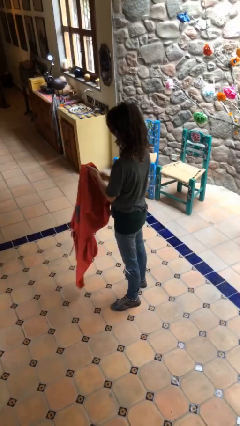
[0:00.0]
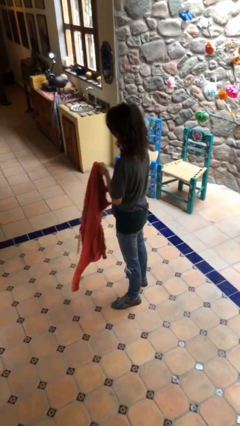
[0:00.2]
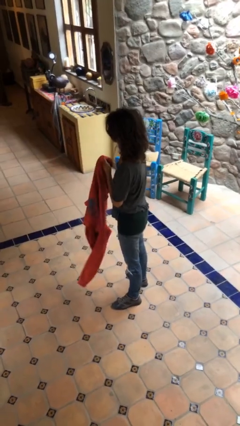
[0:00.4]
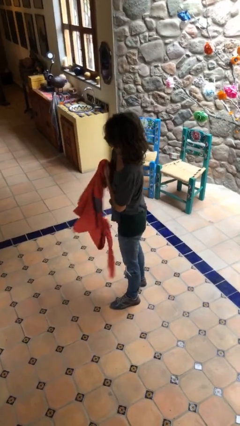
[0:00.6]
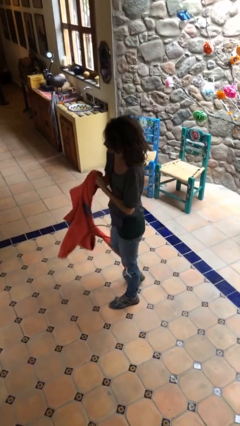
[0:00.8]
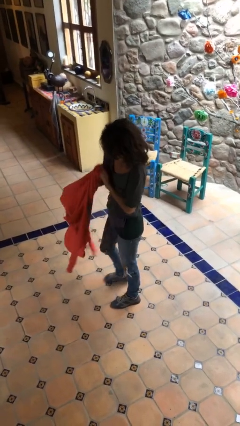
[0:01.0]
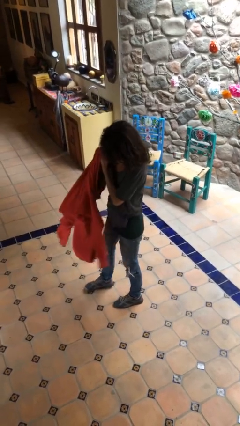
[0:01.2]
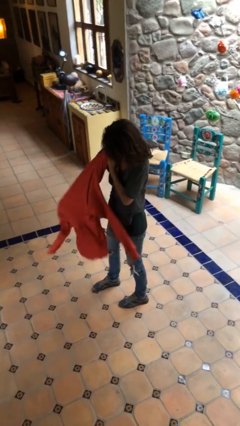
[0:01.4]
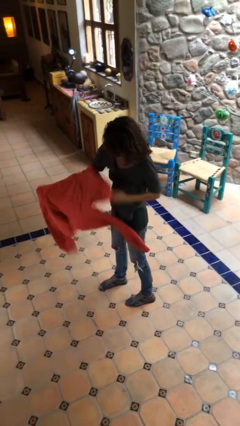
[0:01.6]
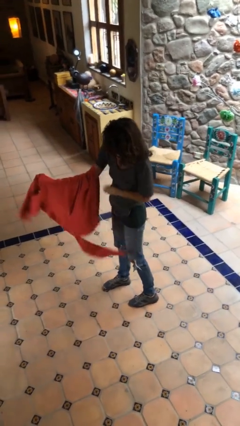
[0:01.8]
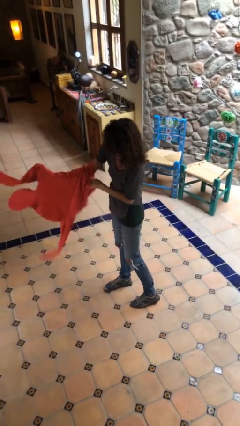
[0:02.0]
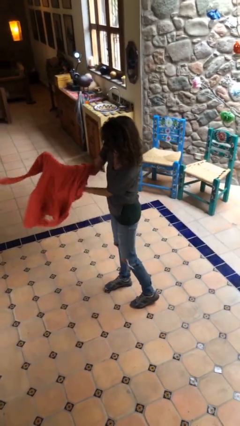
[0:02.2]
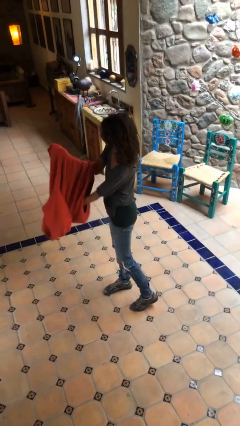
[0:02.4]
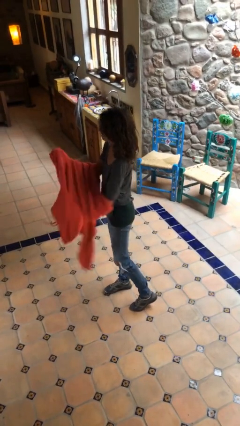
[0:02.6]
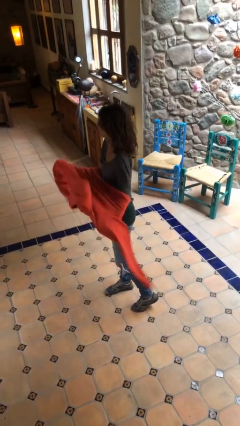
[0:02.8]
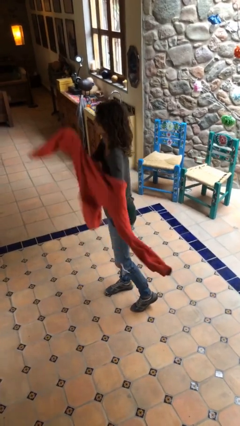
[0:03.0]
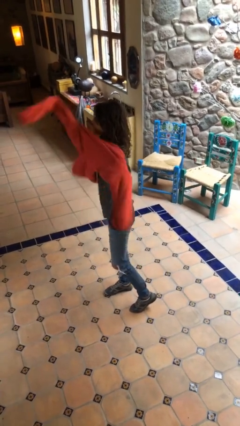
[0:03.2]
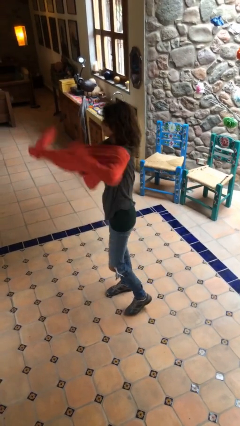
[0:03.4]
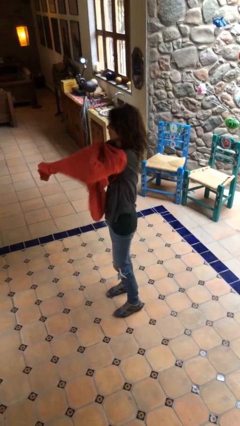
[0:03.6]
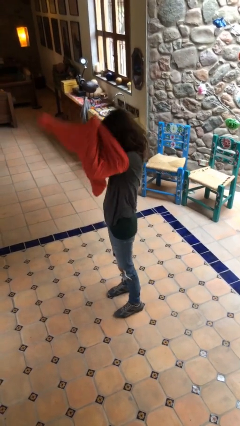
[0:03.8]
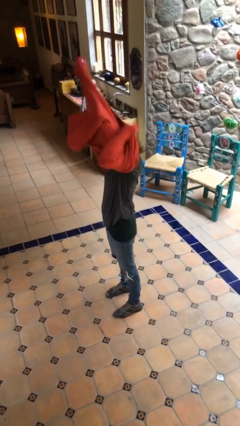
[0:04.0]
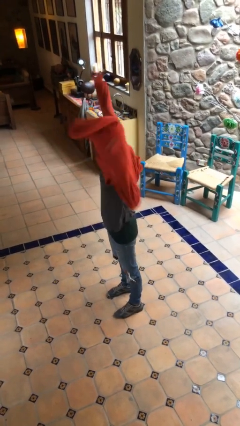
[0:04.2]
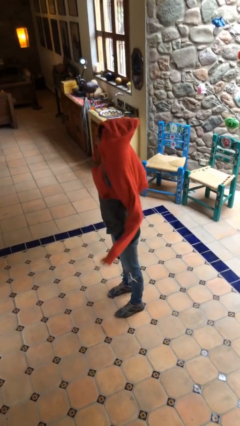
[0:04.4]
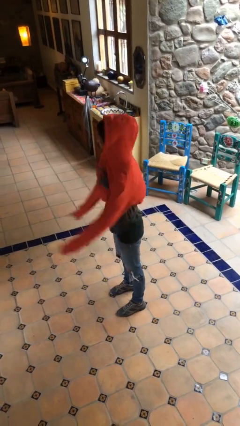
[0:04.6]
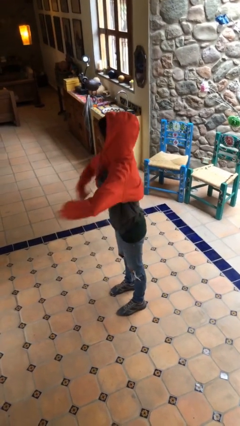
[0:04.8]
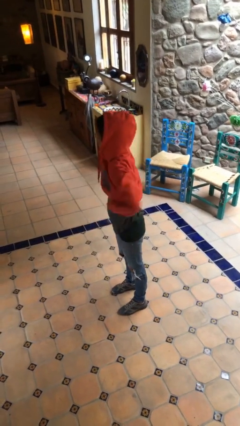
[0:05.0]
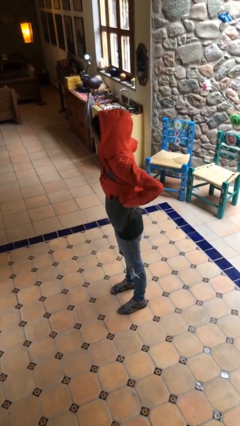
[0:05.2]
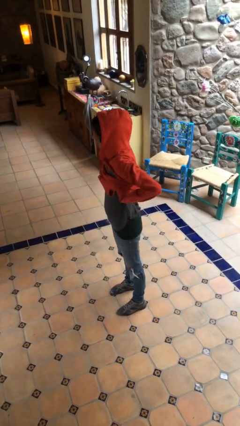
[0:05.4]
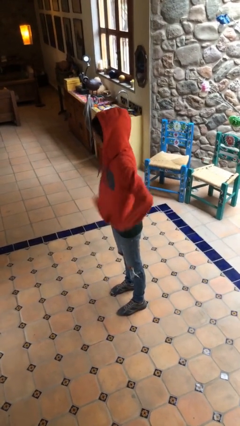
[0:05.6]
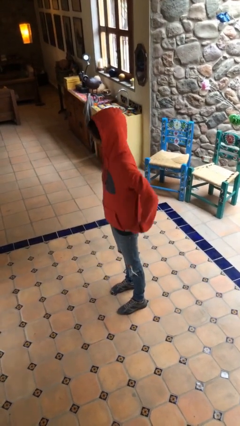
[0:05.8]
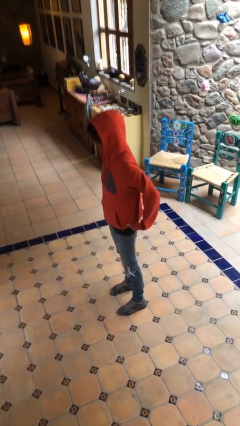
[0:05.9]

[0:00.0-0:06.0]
person puts on hoodie

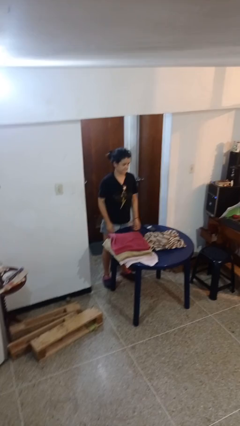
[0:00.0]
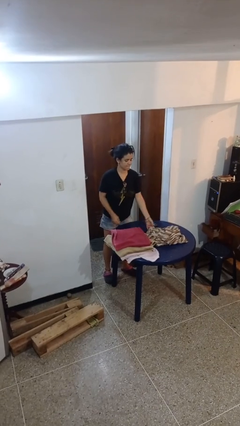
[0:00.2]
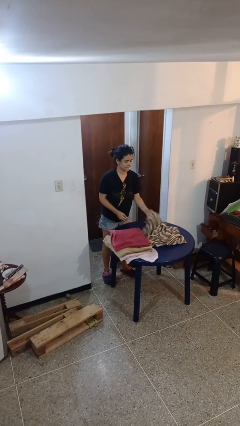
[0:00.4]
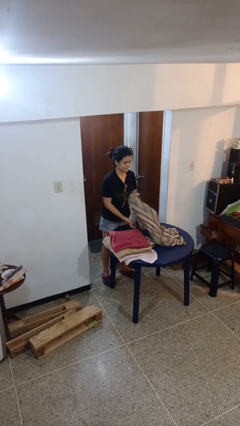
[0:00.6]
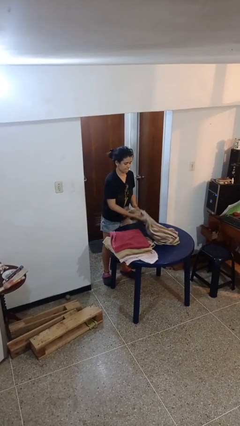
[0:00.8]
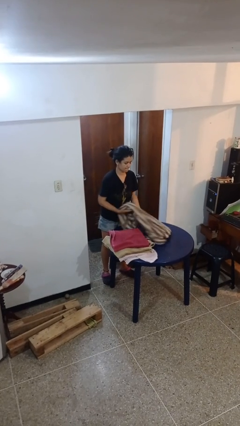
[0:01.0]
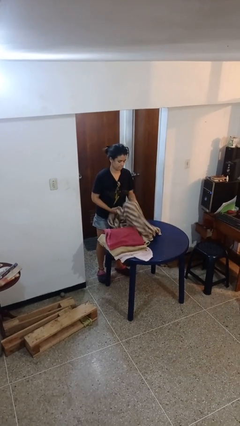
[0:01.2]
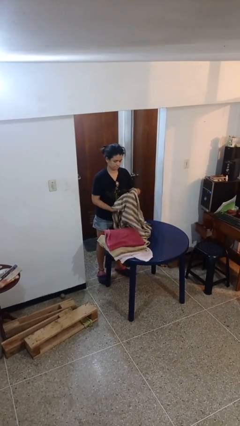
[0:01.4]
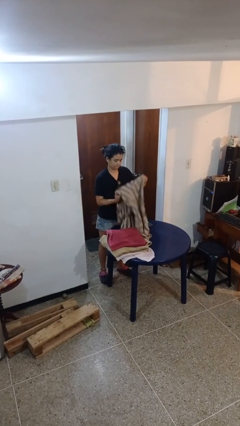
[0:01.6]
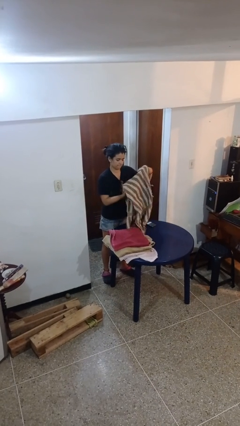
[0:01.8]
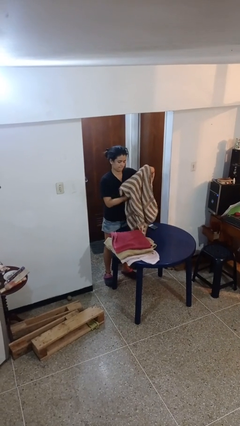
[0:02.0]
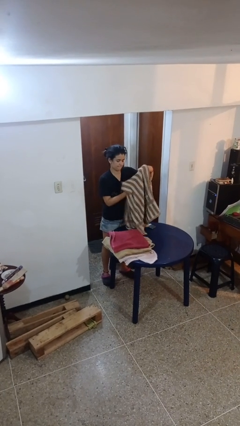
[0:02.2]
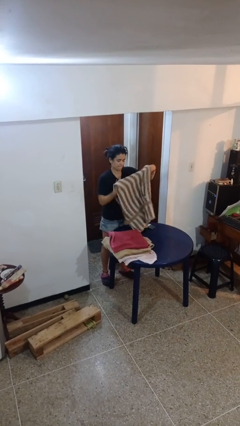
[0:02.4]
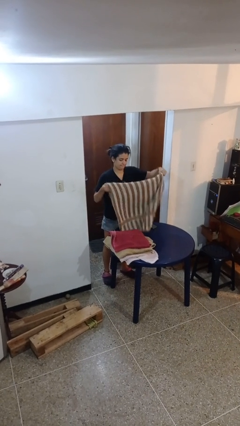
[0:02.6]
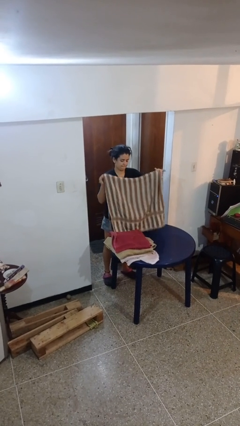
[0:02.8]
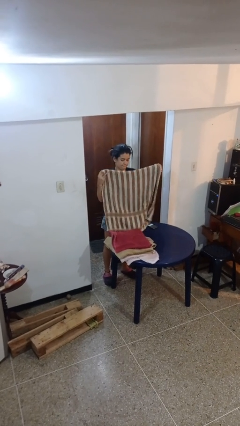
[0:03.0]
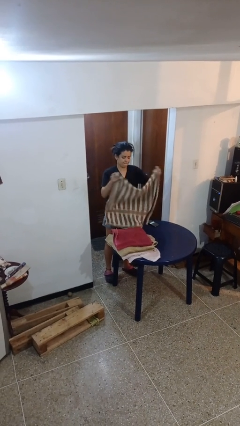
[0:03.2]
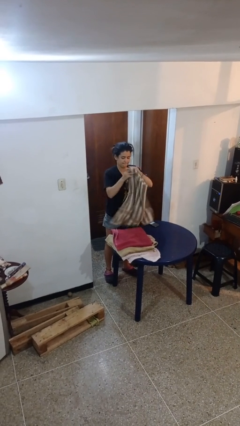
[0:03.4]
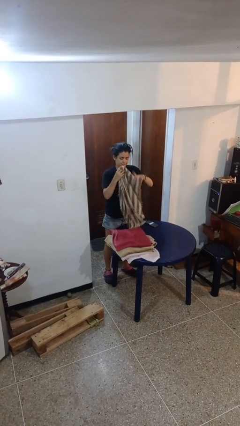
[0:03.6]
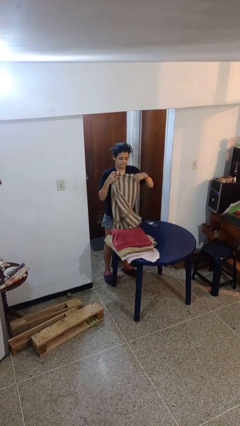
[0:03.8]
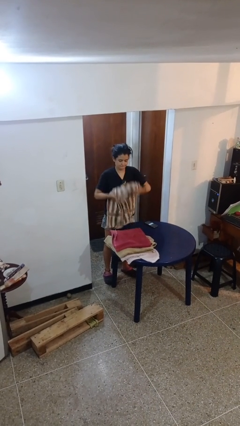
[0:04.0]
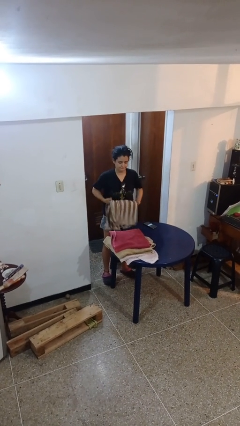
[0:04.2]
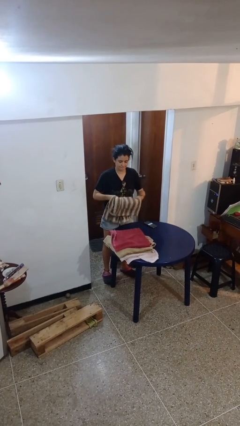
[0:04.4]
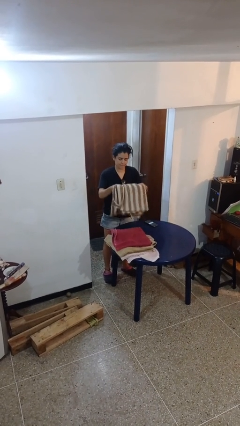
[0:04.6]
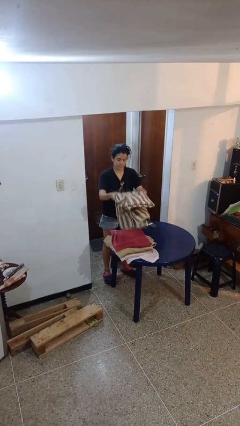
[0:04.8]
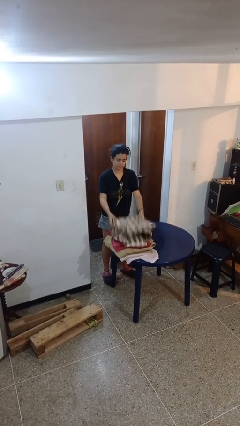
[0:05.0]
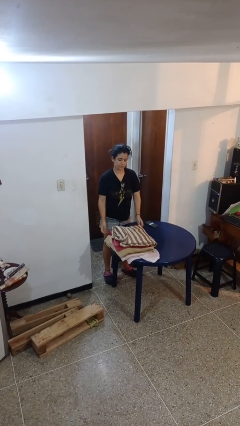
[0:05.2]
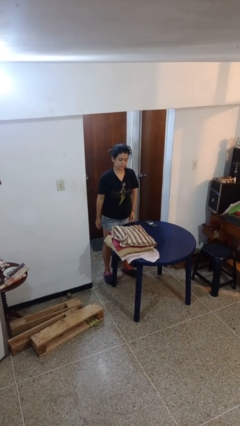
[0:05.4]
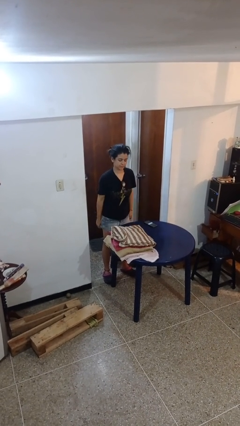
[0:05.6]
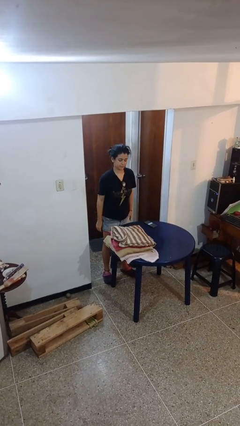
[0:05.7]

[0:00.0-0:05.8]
person folds towel

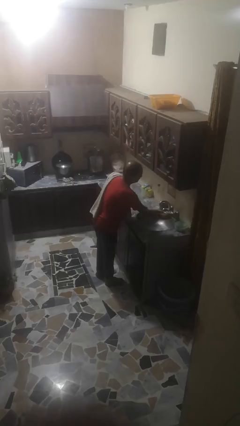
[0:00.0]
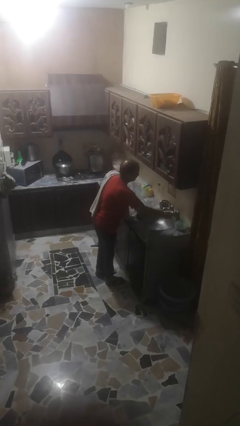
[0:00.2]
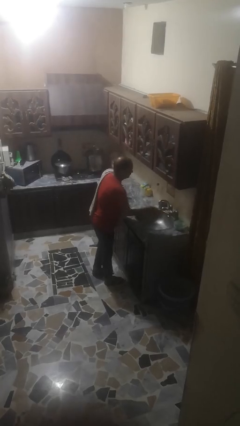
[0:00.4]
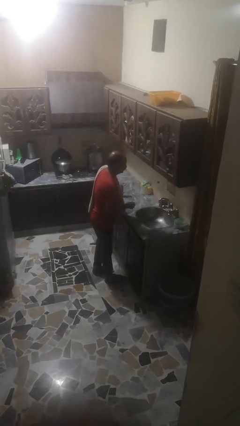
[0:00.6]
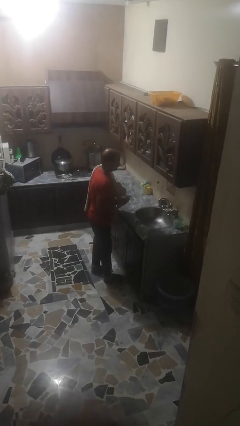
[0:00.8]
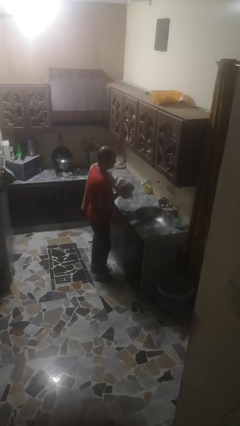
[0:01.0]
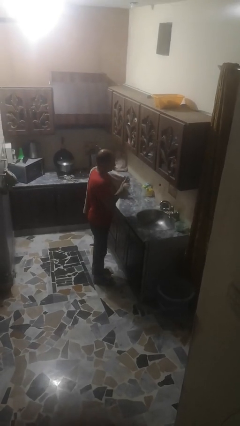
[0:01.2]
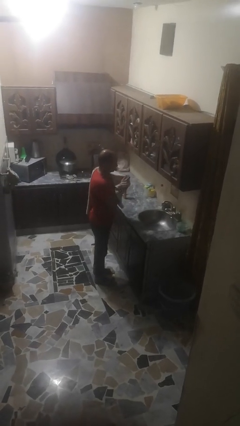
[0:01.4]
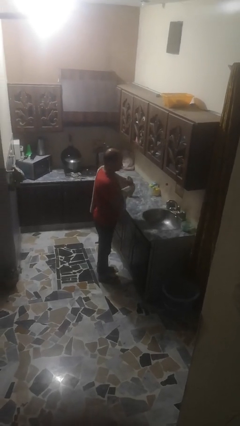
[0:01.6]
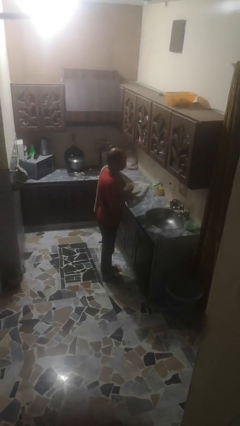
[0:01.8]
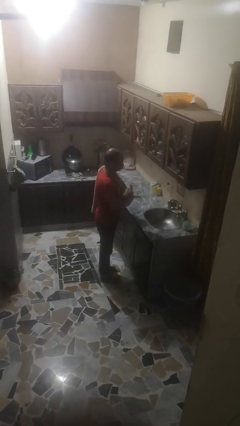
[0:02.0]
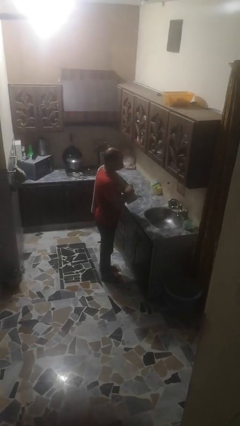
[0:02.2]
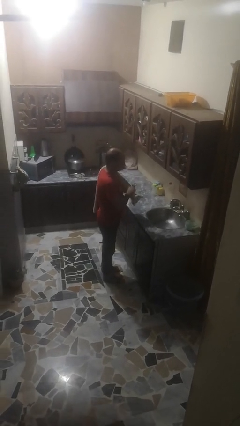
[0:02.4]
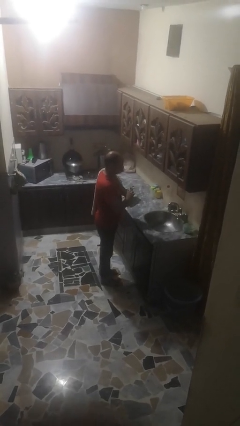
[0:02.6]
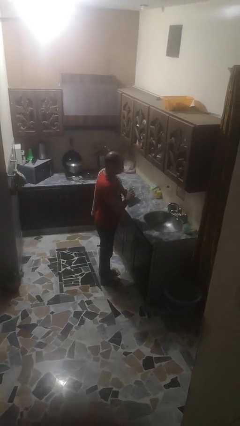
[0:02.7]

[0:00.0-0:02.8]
person dries hands with towel

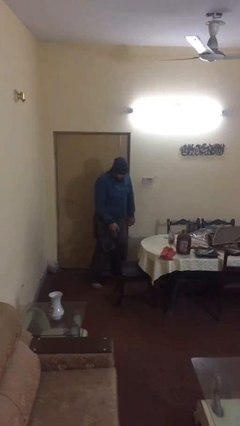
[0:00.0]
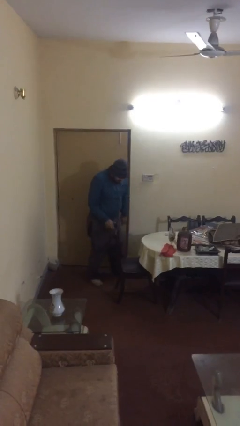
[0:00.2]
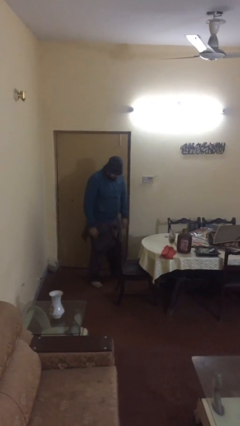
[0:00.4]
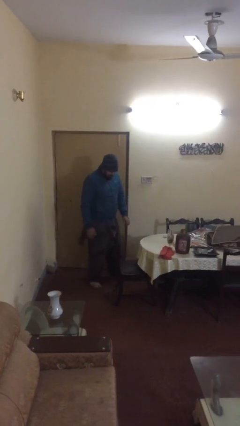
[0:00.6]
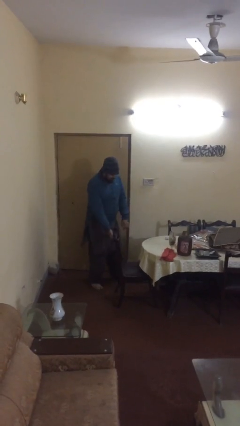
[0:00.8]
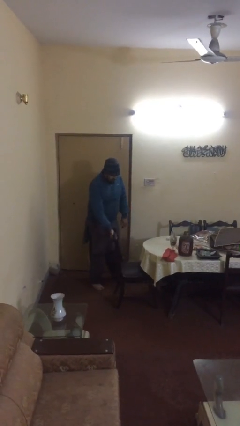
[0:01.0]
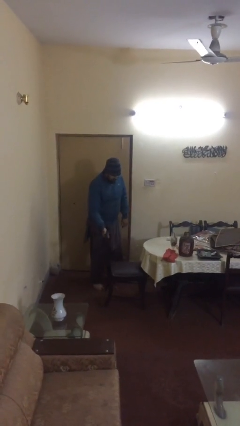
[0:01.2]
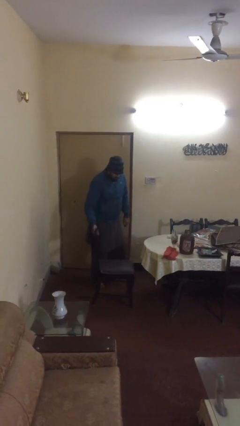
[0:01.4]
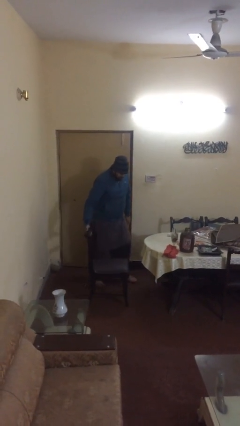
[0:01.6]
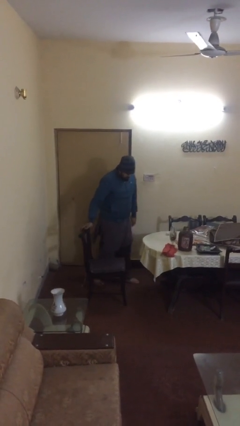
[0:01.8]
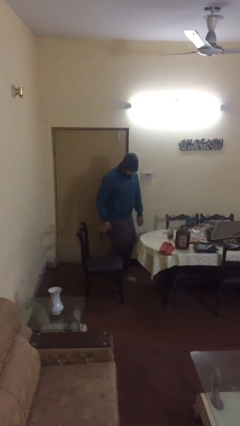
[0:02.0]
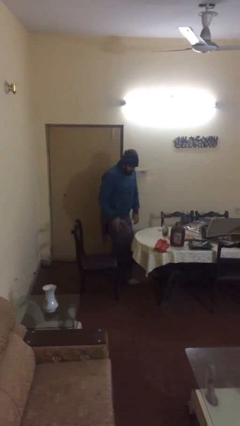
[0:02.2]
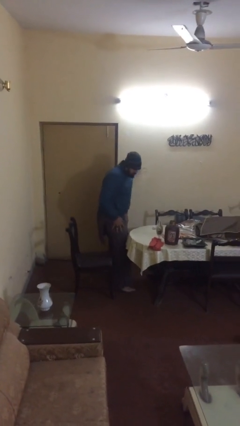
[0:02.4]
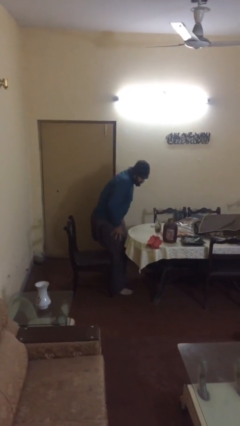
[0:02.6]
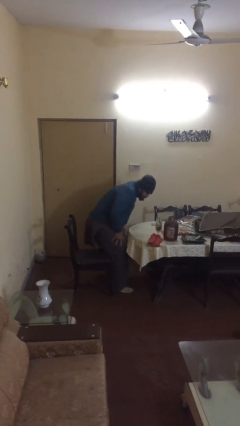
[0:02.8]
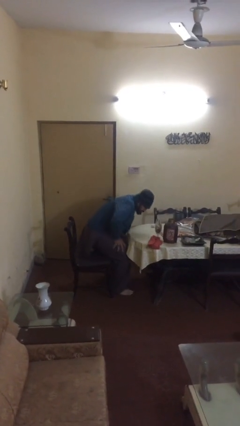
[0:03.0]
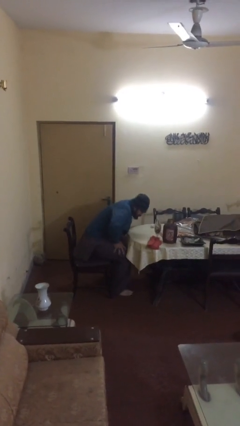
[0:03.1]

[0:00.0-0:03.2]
person sits down

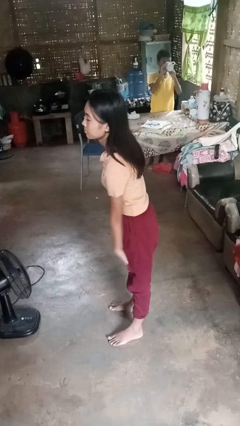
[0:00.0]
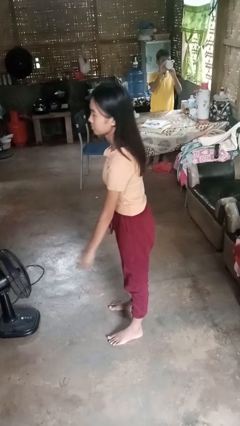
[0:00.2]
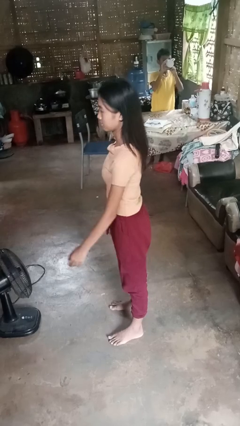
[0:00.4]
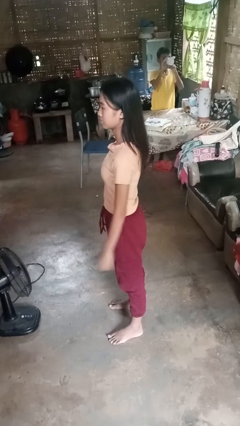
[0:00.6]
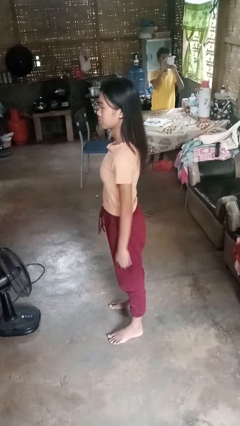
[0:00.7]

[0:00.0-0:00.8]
person slaps hands on thighs
